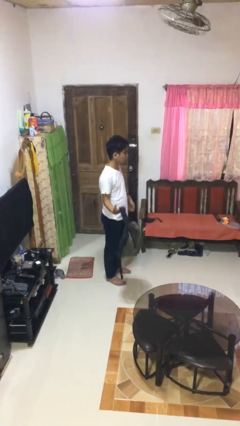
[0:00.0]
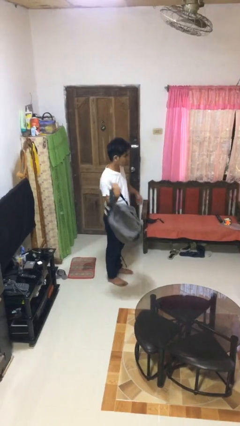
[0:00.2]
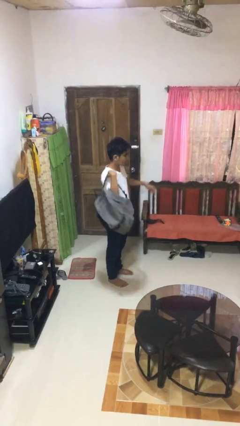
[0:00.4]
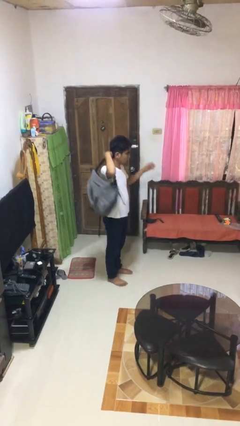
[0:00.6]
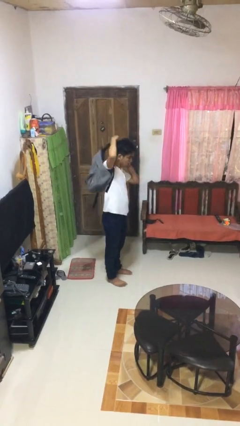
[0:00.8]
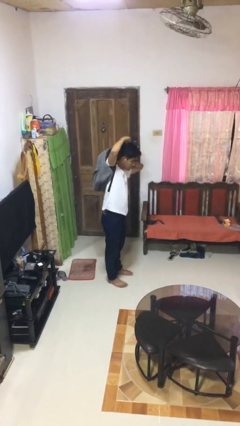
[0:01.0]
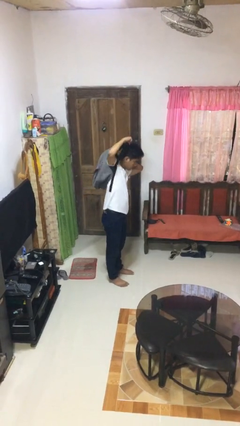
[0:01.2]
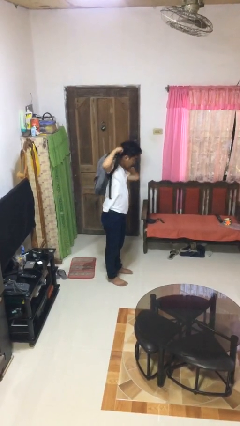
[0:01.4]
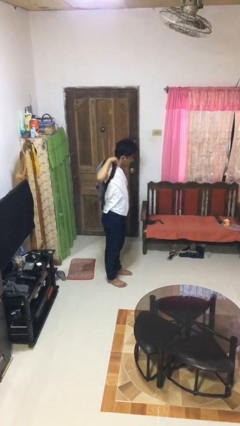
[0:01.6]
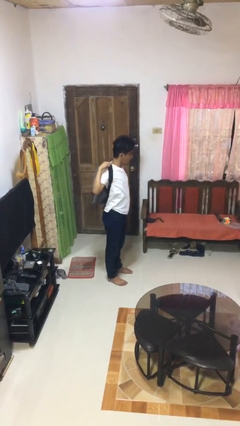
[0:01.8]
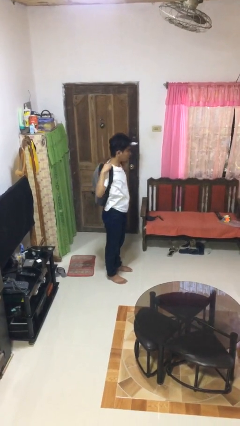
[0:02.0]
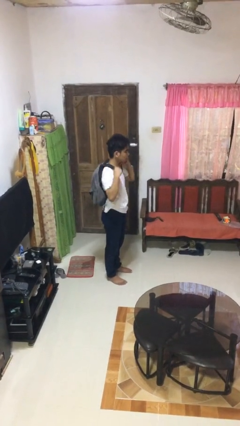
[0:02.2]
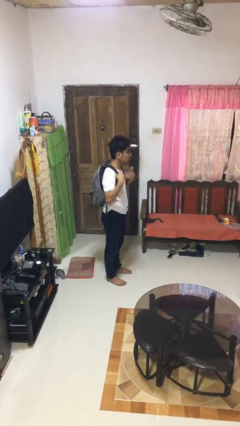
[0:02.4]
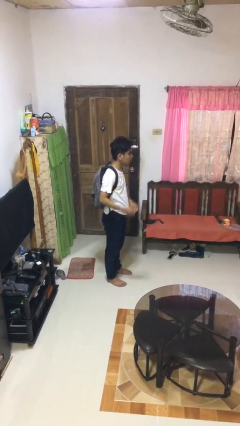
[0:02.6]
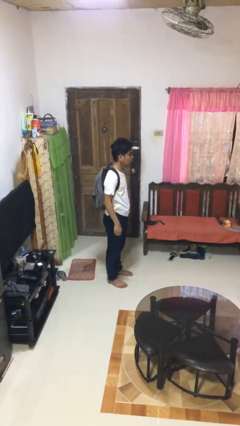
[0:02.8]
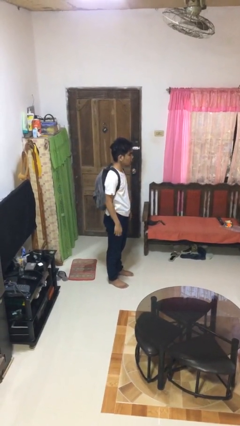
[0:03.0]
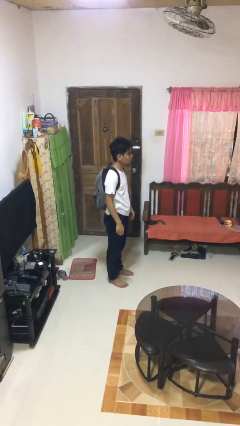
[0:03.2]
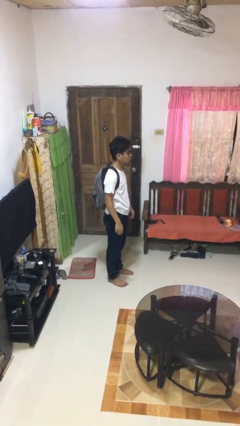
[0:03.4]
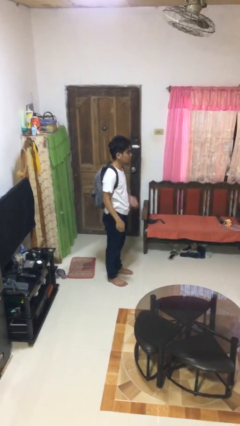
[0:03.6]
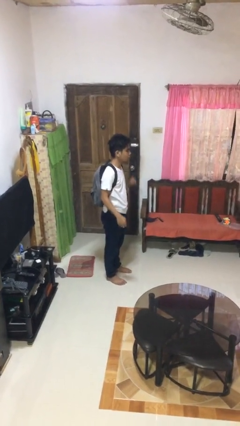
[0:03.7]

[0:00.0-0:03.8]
person puts on backpack

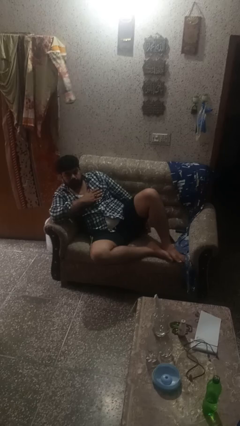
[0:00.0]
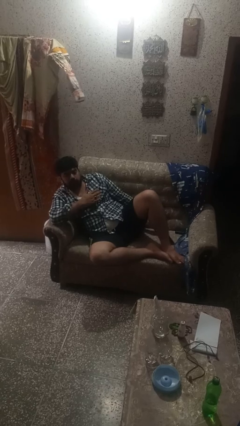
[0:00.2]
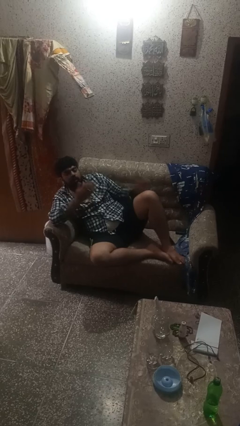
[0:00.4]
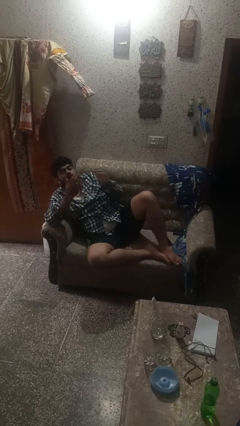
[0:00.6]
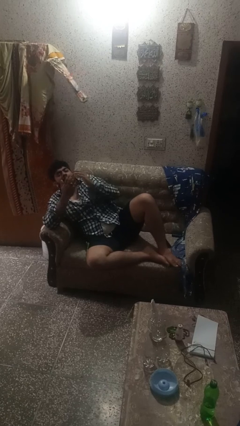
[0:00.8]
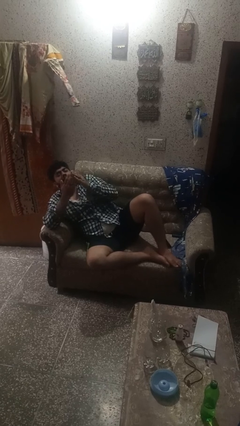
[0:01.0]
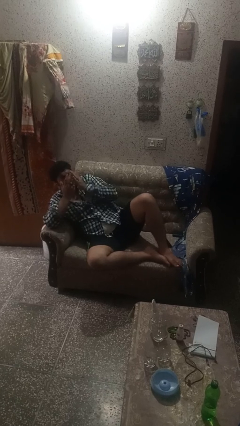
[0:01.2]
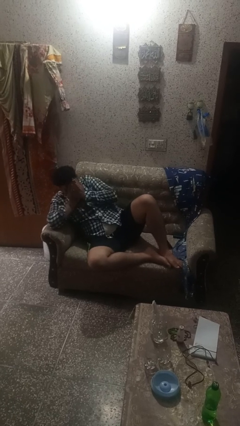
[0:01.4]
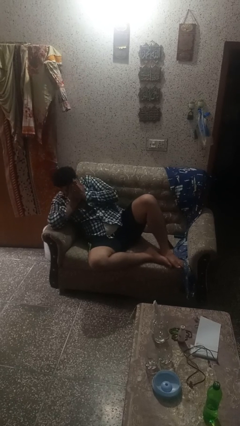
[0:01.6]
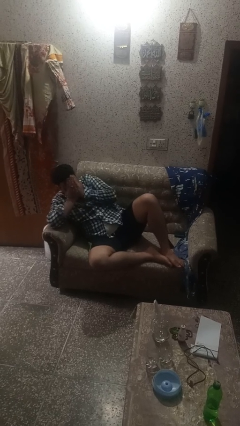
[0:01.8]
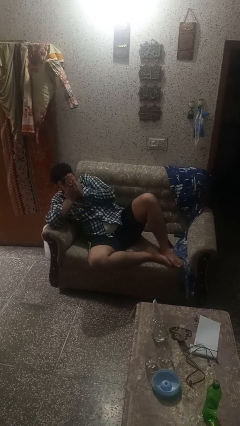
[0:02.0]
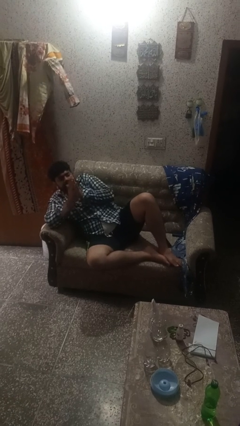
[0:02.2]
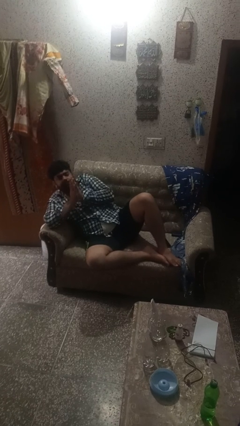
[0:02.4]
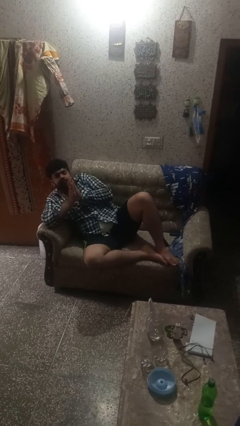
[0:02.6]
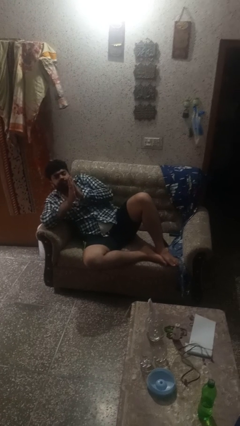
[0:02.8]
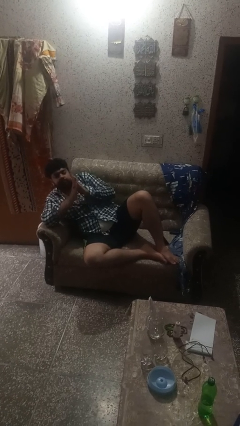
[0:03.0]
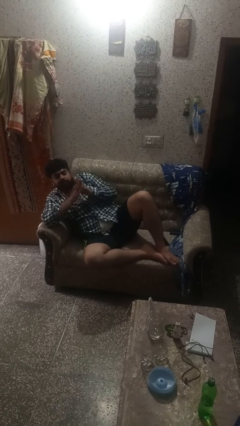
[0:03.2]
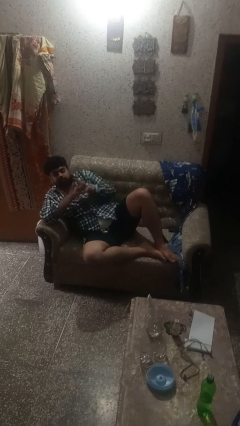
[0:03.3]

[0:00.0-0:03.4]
person sneezes into hand

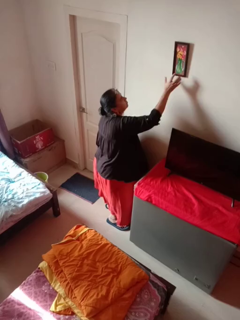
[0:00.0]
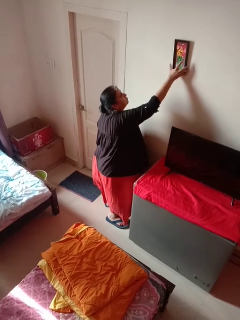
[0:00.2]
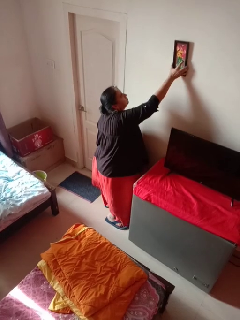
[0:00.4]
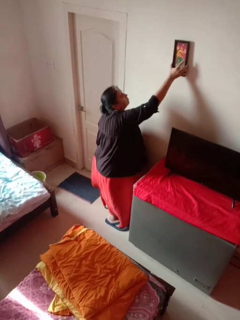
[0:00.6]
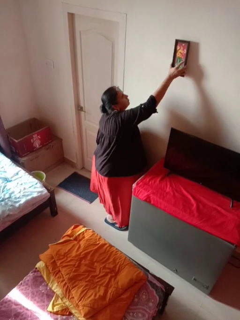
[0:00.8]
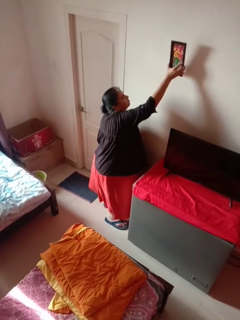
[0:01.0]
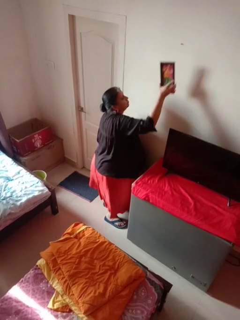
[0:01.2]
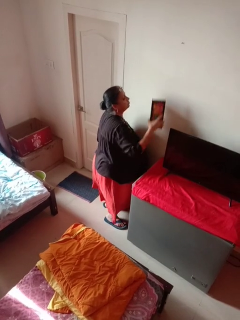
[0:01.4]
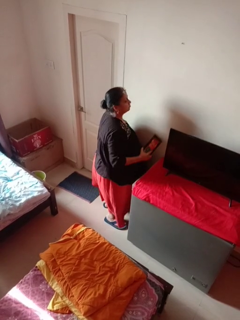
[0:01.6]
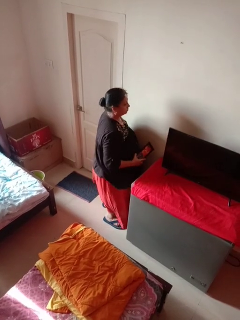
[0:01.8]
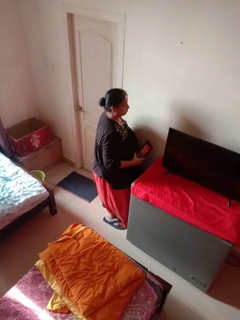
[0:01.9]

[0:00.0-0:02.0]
person takes down picture frame

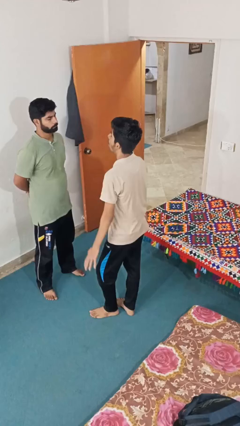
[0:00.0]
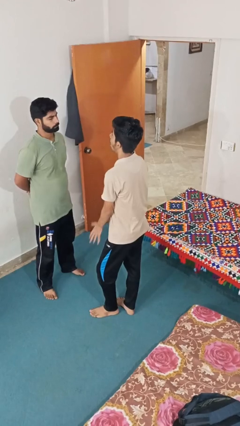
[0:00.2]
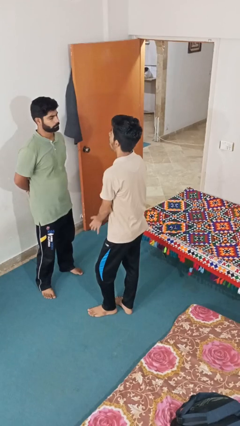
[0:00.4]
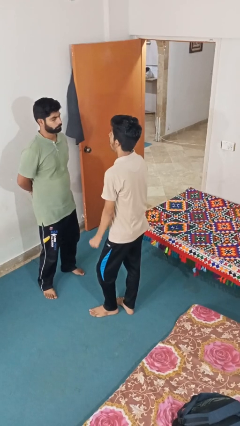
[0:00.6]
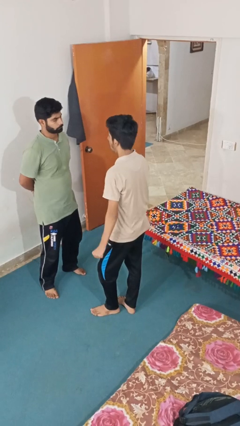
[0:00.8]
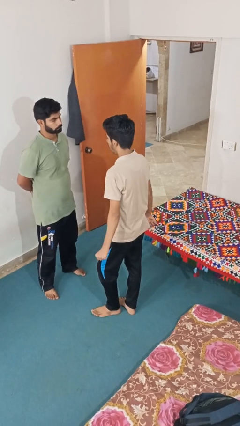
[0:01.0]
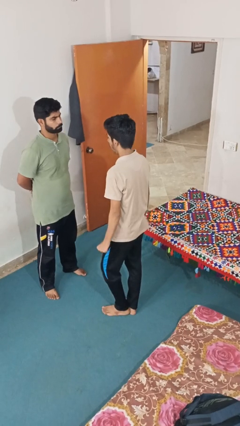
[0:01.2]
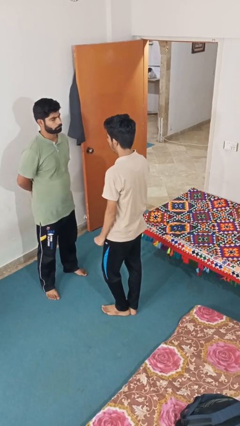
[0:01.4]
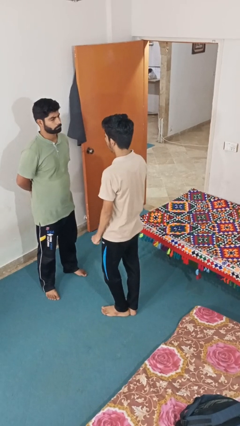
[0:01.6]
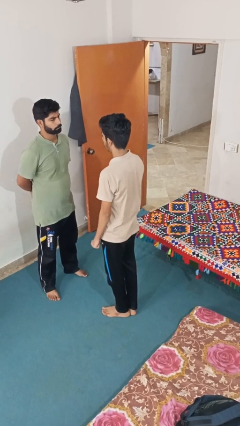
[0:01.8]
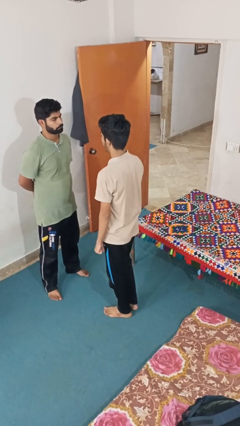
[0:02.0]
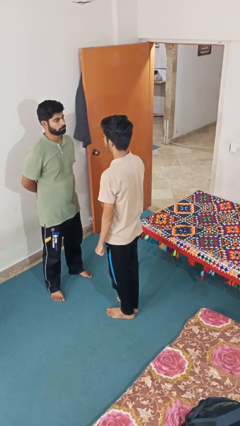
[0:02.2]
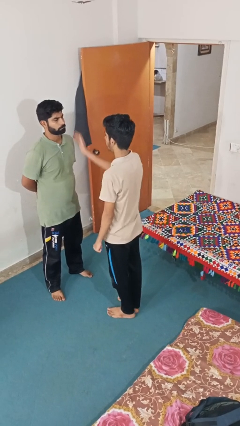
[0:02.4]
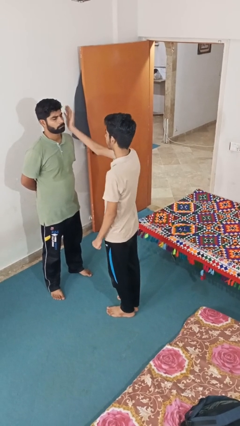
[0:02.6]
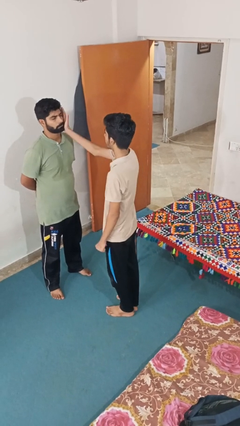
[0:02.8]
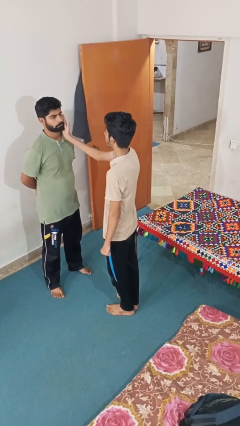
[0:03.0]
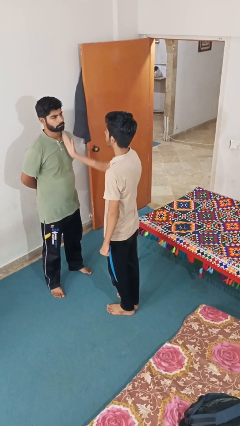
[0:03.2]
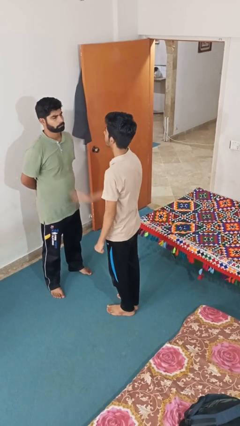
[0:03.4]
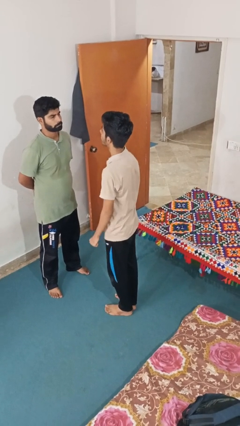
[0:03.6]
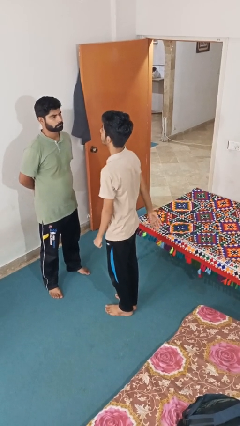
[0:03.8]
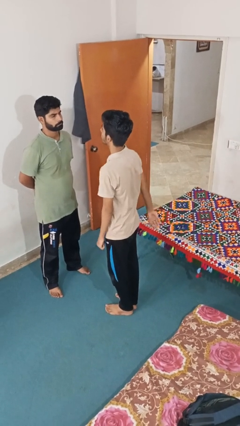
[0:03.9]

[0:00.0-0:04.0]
person touches face of person

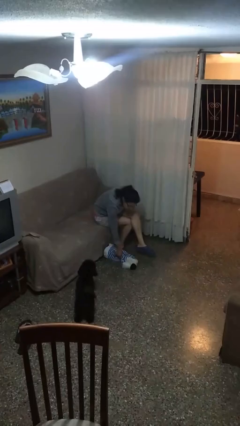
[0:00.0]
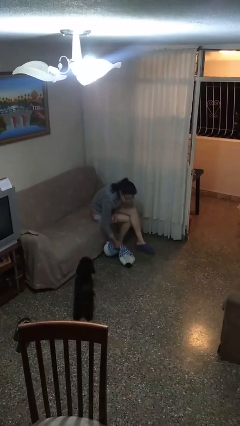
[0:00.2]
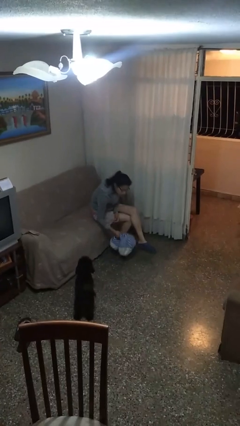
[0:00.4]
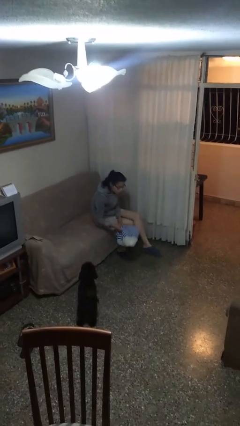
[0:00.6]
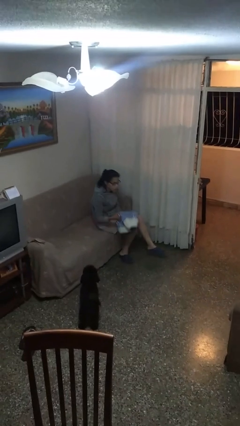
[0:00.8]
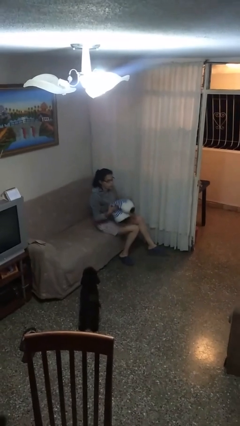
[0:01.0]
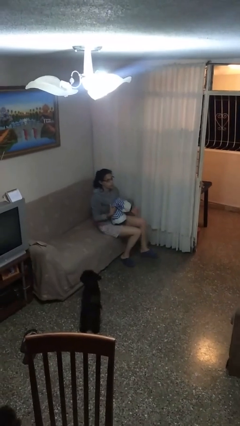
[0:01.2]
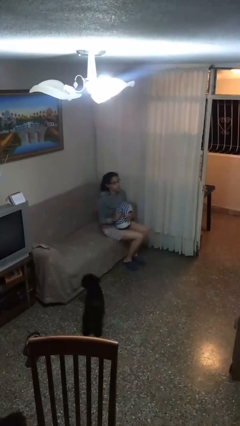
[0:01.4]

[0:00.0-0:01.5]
person picks up object from floor

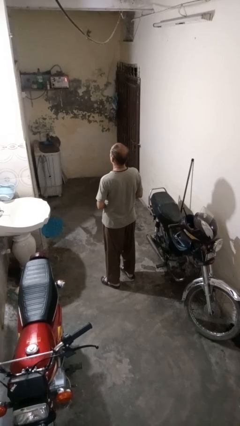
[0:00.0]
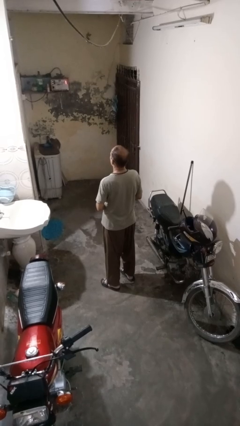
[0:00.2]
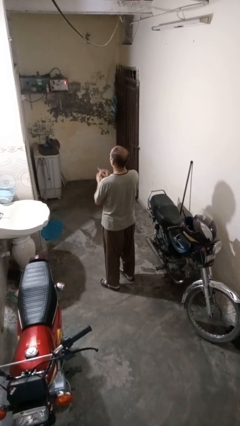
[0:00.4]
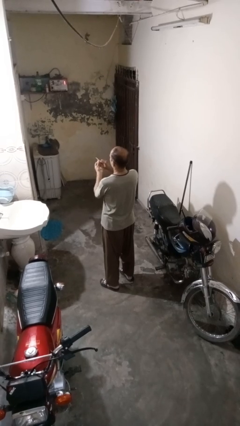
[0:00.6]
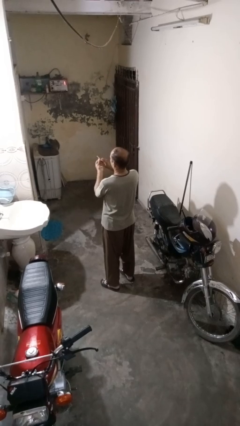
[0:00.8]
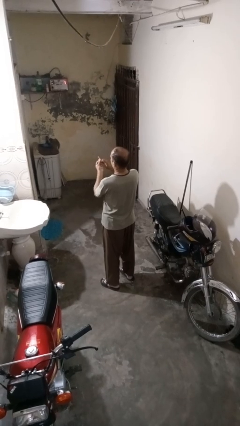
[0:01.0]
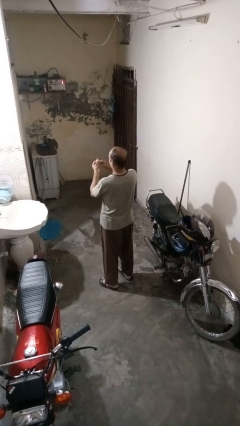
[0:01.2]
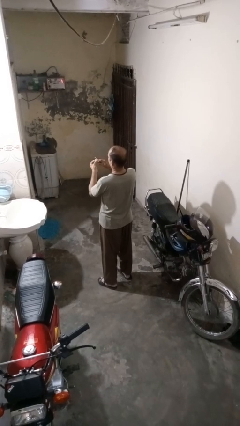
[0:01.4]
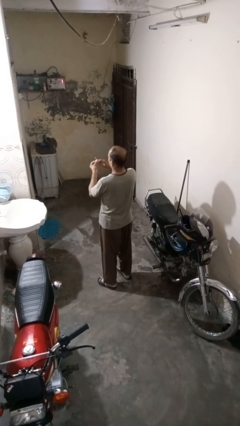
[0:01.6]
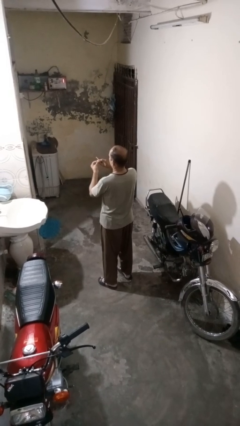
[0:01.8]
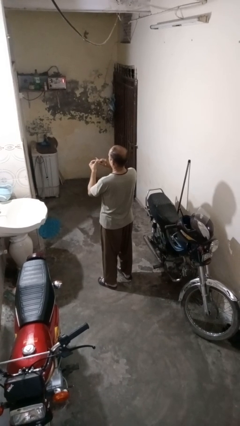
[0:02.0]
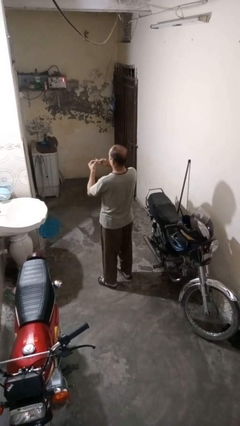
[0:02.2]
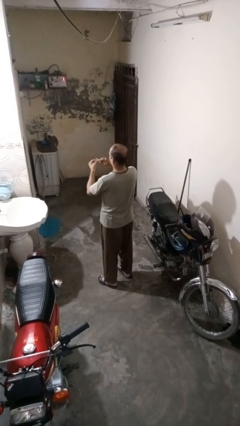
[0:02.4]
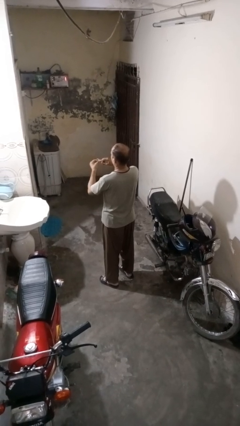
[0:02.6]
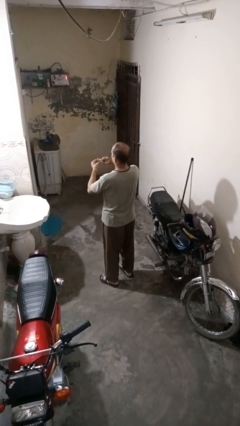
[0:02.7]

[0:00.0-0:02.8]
person files fingernails

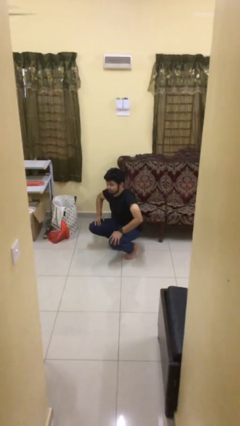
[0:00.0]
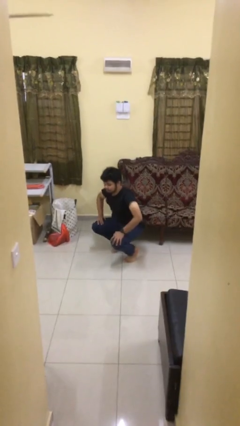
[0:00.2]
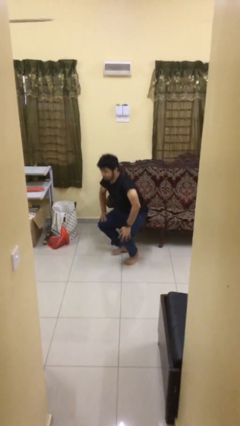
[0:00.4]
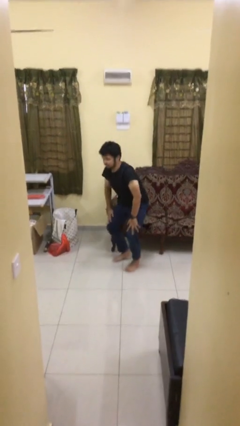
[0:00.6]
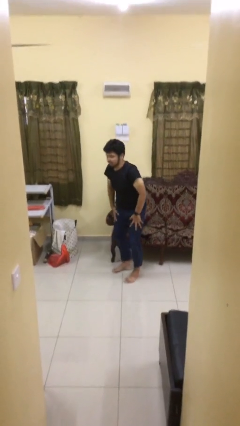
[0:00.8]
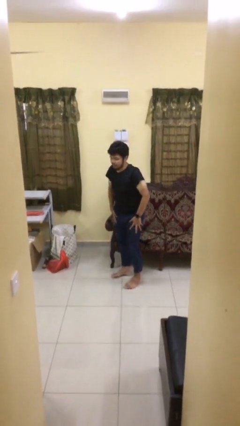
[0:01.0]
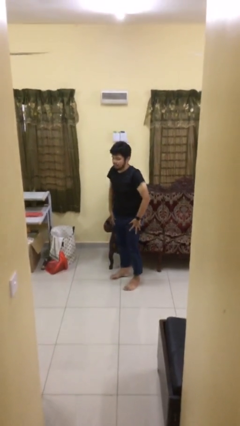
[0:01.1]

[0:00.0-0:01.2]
person stands up
